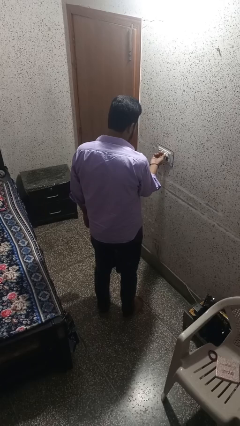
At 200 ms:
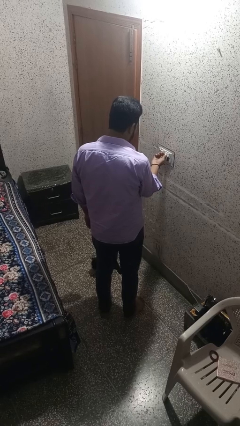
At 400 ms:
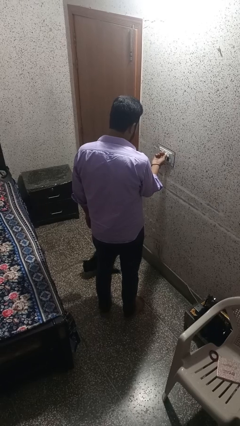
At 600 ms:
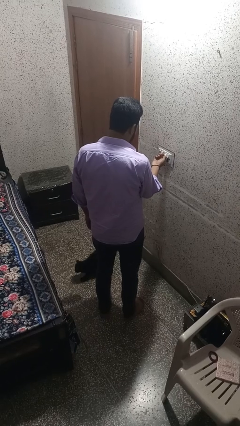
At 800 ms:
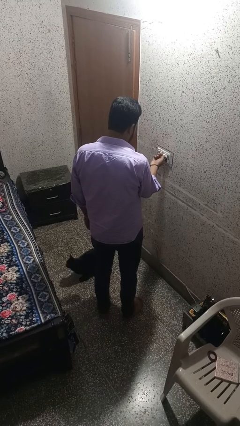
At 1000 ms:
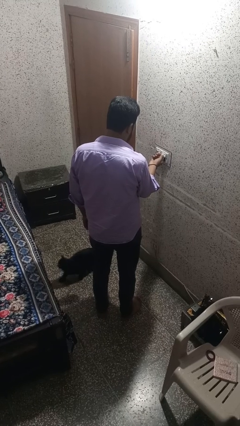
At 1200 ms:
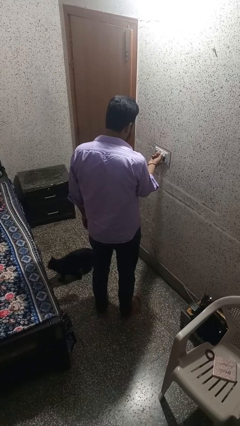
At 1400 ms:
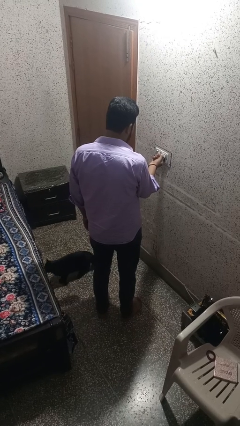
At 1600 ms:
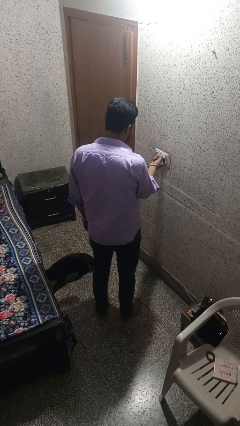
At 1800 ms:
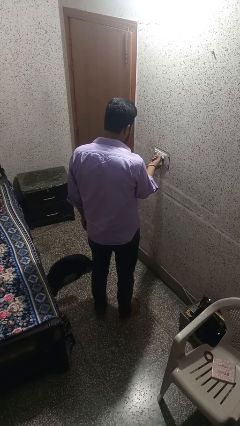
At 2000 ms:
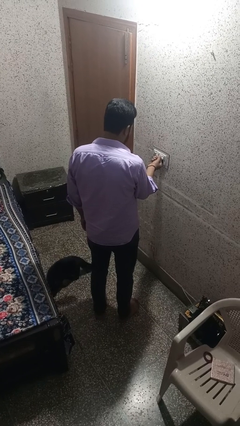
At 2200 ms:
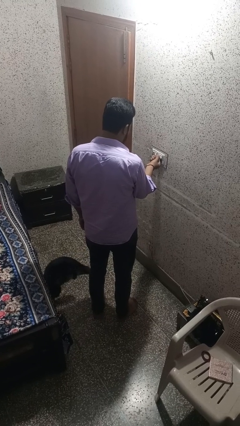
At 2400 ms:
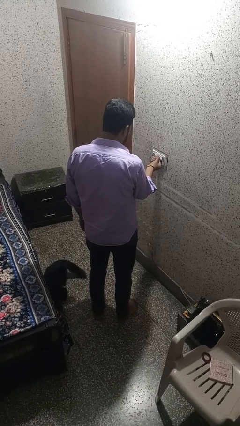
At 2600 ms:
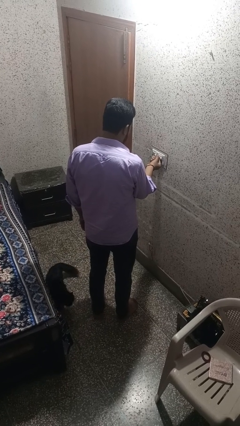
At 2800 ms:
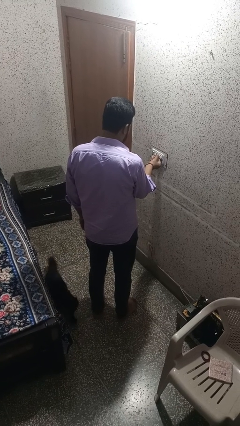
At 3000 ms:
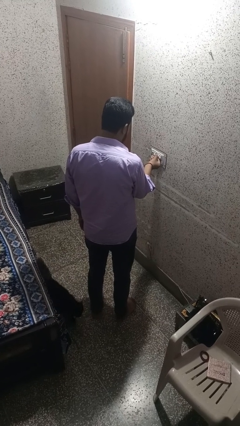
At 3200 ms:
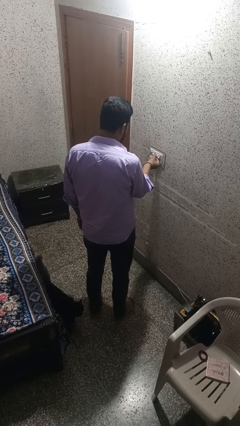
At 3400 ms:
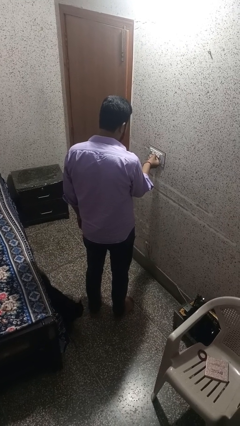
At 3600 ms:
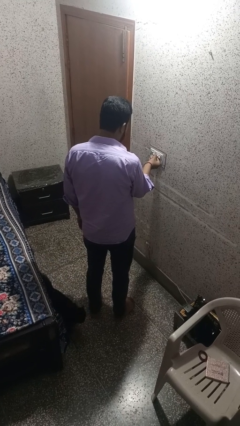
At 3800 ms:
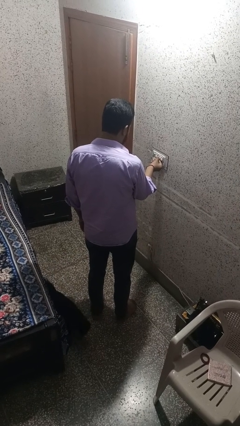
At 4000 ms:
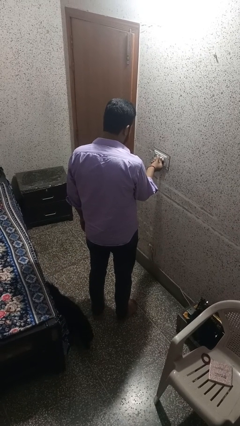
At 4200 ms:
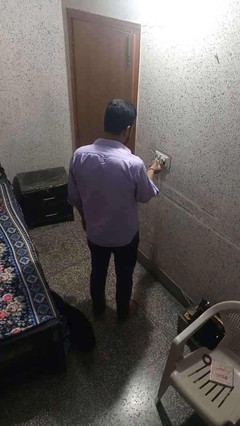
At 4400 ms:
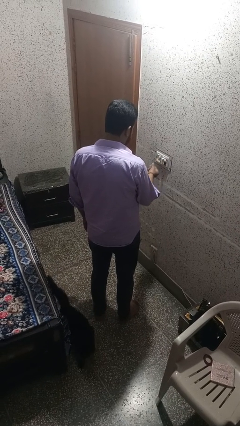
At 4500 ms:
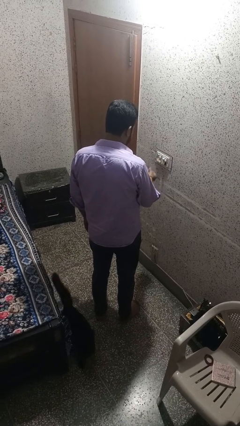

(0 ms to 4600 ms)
person turns off fan

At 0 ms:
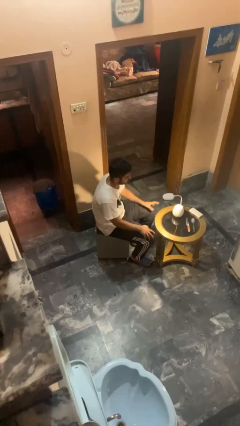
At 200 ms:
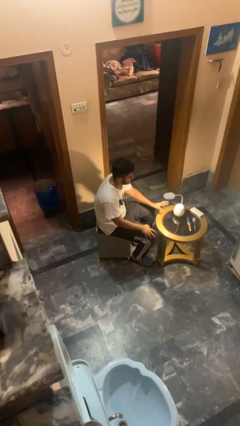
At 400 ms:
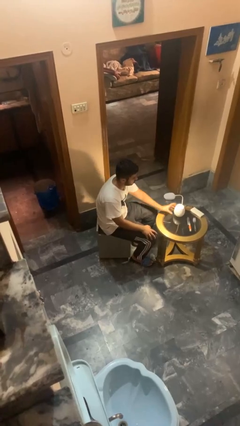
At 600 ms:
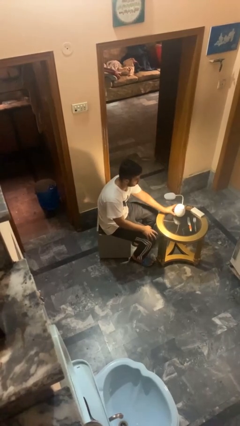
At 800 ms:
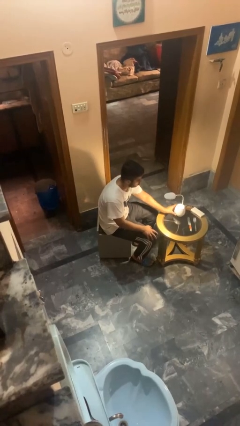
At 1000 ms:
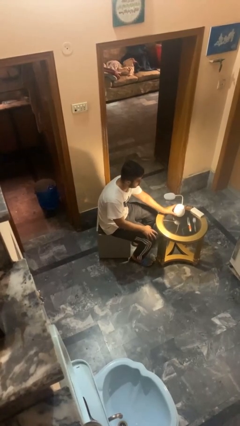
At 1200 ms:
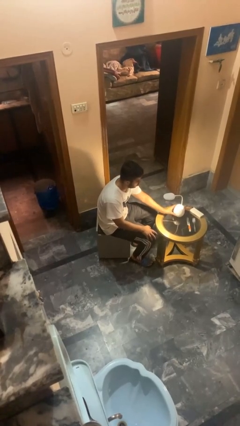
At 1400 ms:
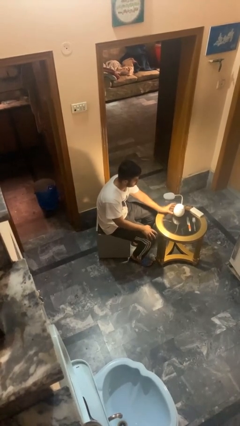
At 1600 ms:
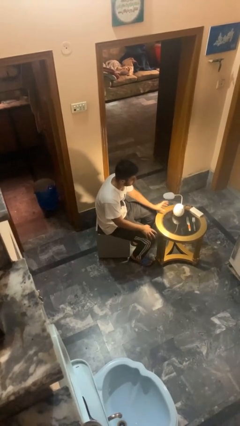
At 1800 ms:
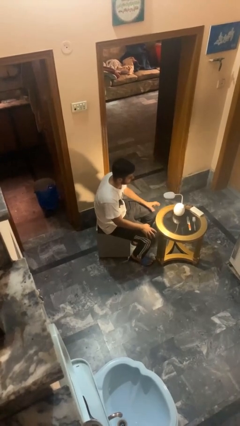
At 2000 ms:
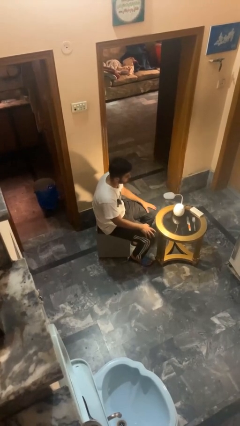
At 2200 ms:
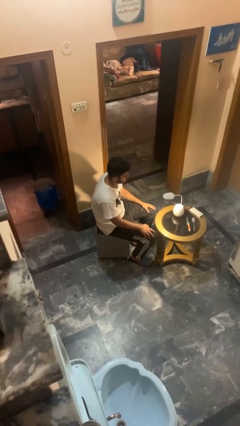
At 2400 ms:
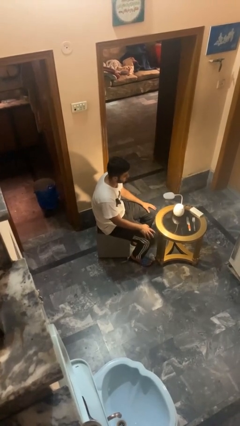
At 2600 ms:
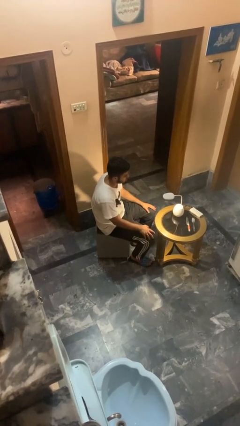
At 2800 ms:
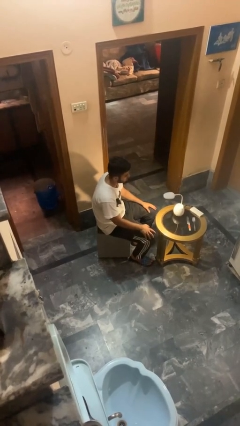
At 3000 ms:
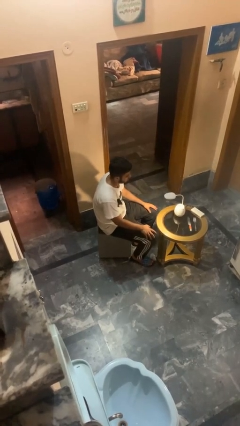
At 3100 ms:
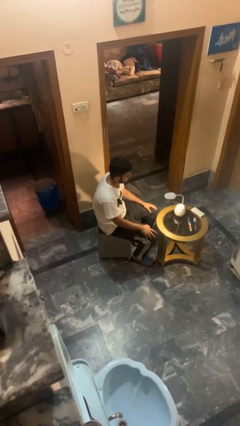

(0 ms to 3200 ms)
person turns off lamp

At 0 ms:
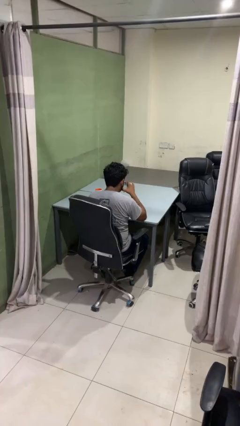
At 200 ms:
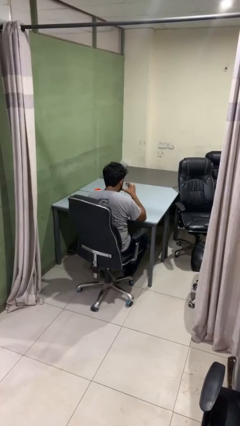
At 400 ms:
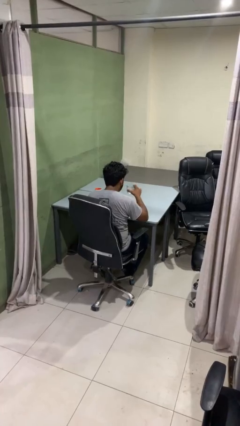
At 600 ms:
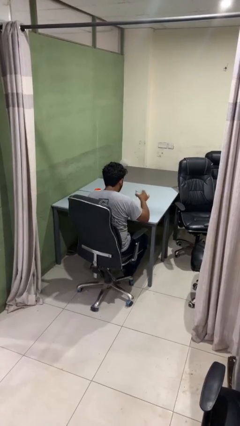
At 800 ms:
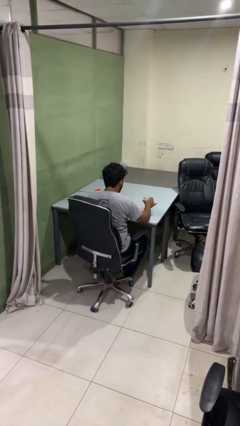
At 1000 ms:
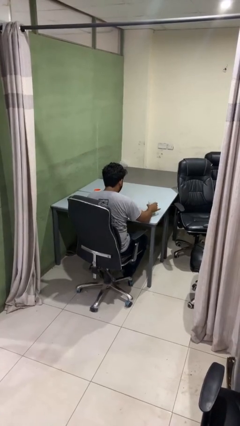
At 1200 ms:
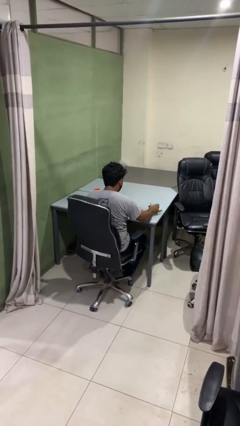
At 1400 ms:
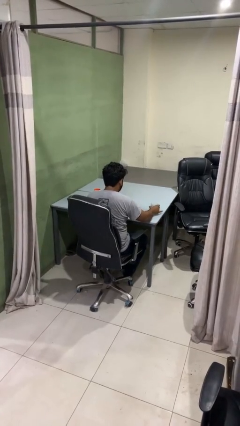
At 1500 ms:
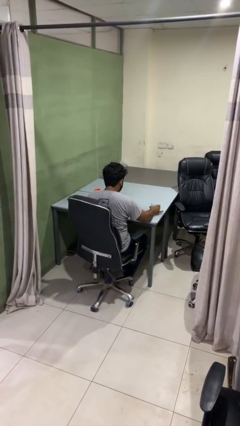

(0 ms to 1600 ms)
person puts down object on table

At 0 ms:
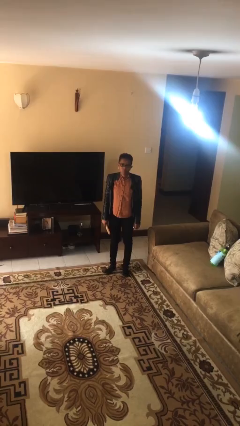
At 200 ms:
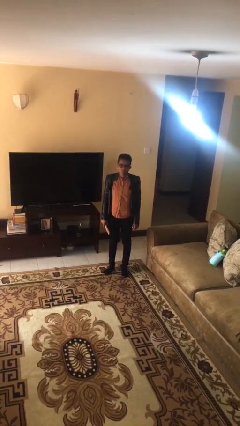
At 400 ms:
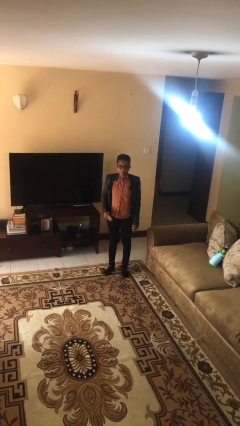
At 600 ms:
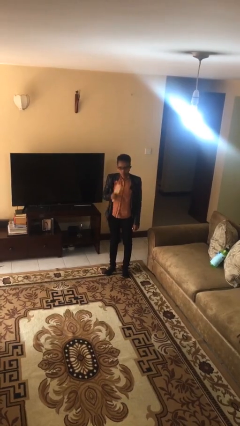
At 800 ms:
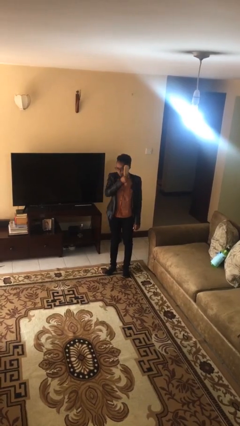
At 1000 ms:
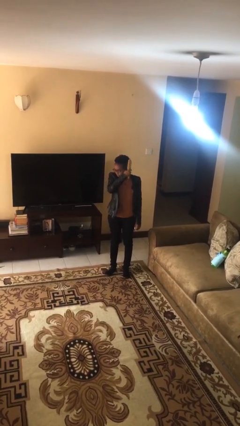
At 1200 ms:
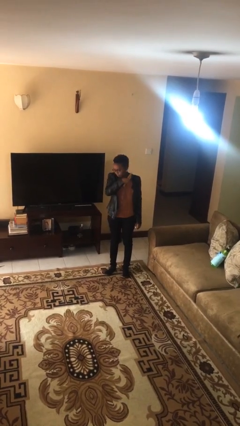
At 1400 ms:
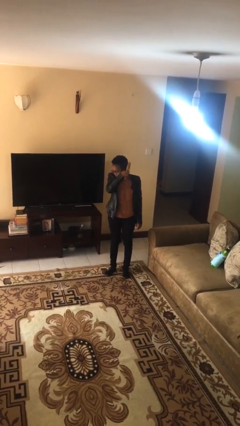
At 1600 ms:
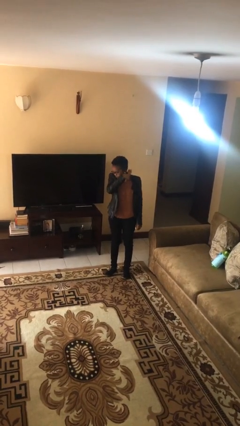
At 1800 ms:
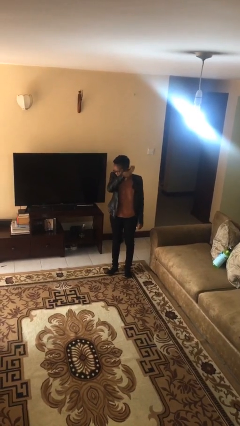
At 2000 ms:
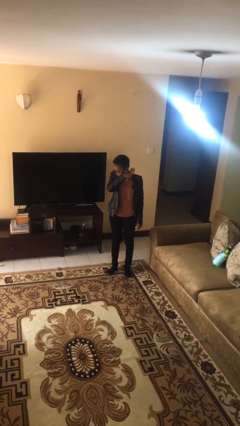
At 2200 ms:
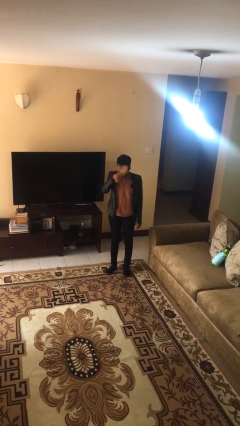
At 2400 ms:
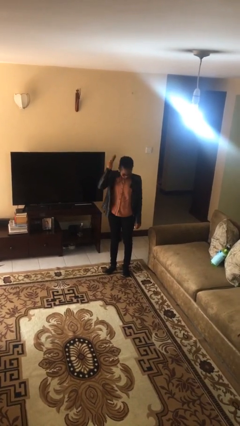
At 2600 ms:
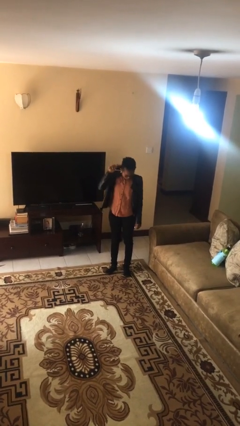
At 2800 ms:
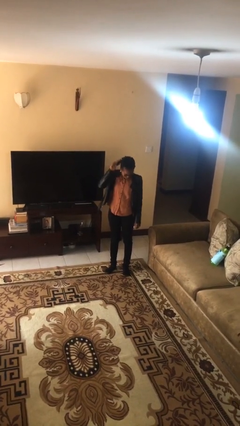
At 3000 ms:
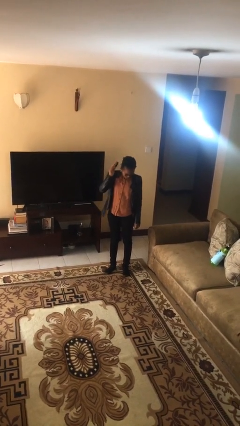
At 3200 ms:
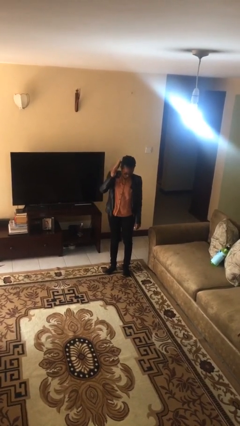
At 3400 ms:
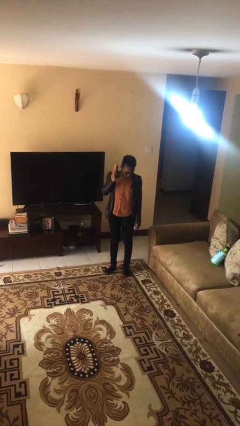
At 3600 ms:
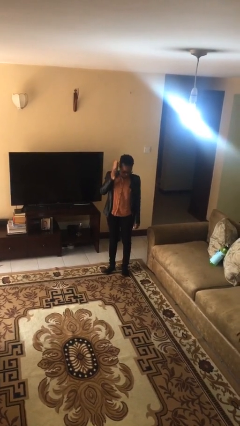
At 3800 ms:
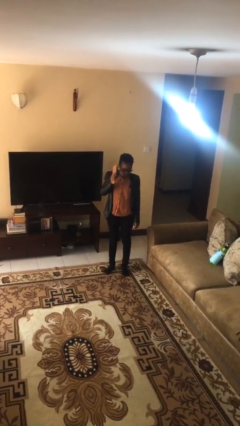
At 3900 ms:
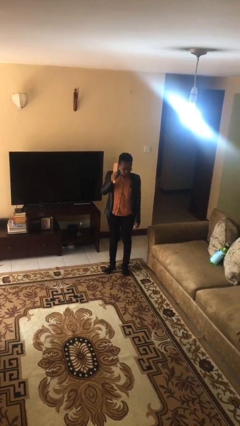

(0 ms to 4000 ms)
person brushes hair

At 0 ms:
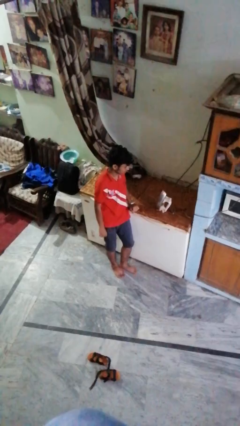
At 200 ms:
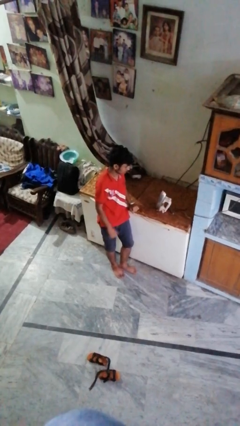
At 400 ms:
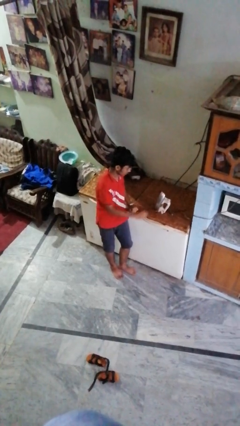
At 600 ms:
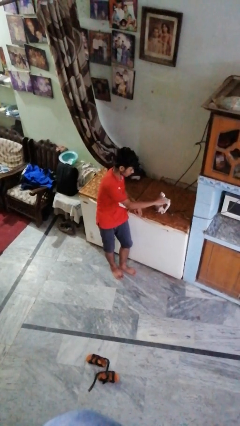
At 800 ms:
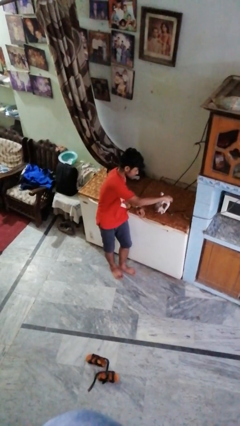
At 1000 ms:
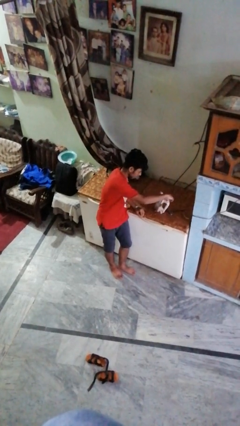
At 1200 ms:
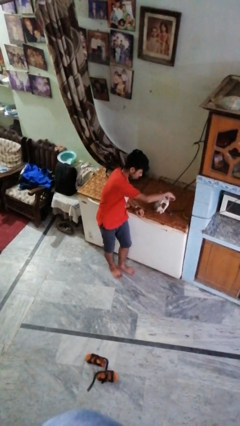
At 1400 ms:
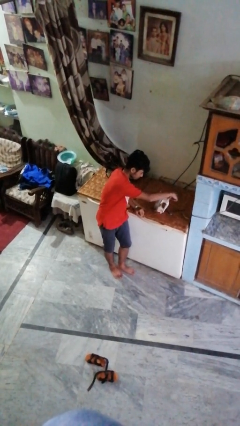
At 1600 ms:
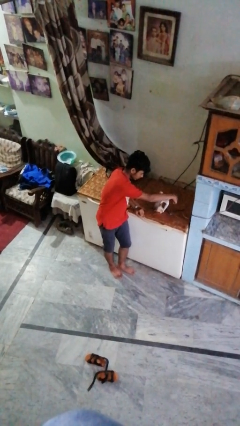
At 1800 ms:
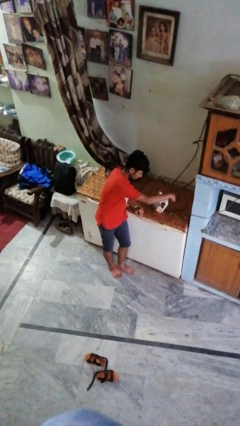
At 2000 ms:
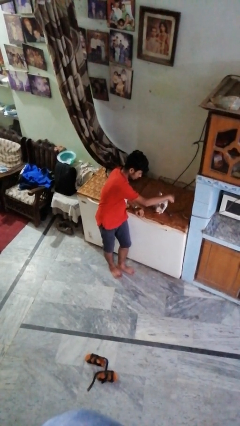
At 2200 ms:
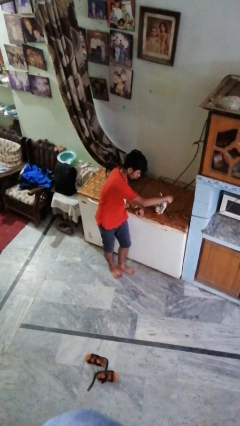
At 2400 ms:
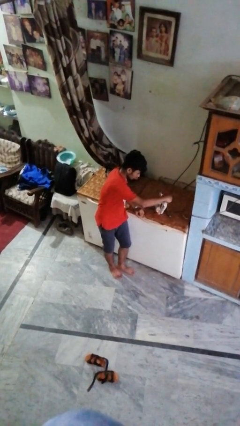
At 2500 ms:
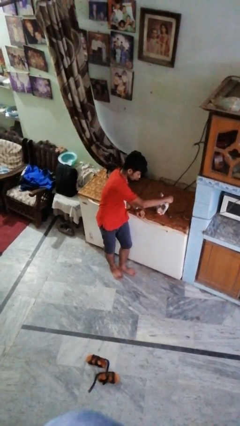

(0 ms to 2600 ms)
person adjusts thermostat

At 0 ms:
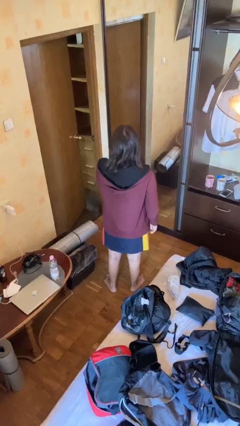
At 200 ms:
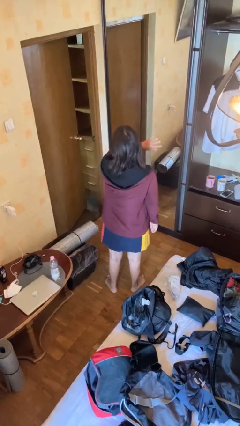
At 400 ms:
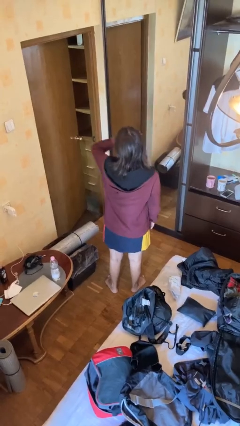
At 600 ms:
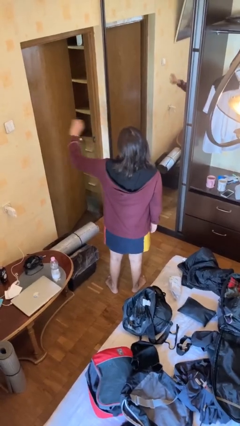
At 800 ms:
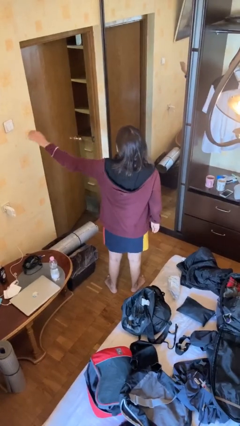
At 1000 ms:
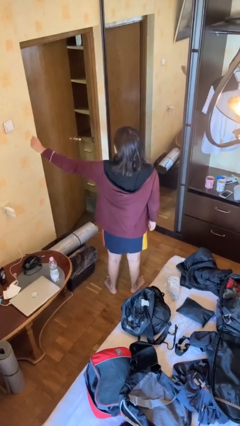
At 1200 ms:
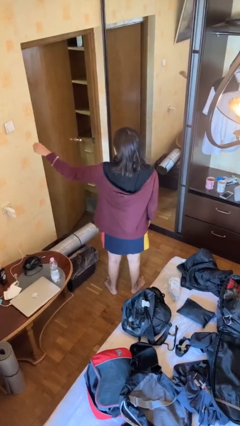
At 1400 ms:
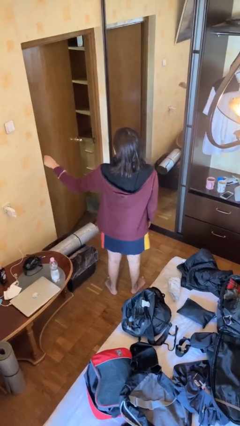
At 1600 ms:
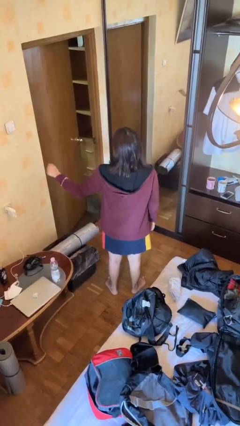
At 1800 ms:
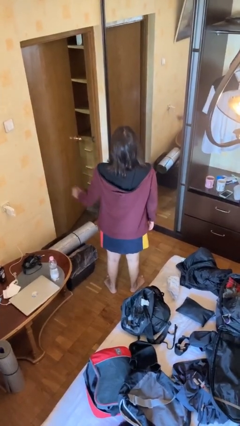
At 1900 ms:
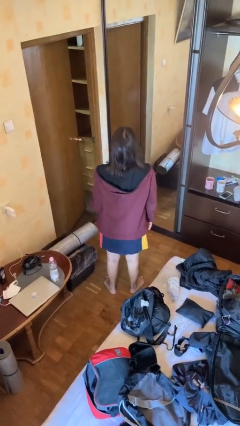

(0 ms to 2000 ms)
person gestures swipe left
